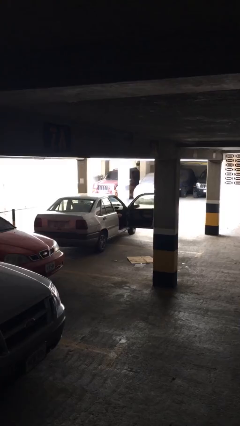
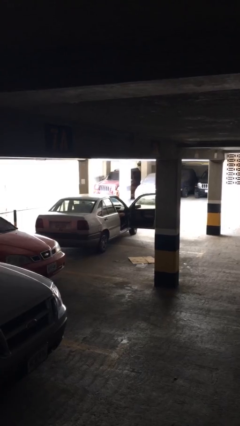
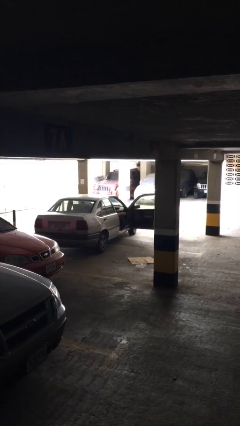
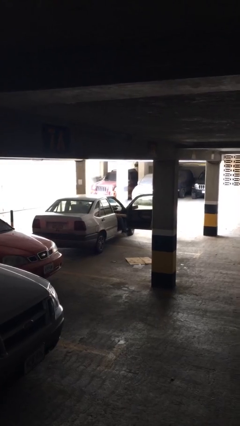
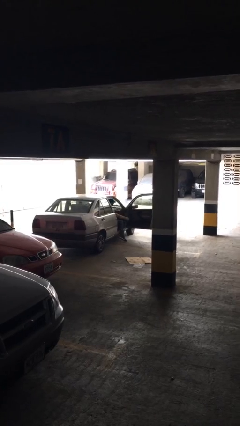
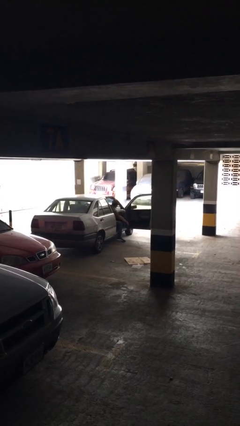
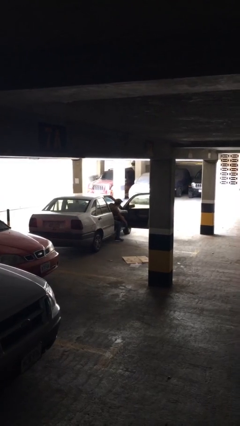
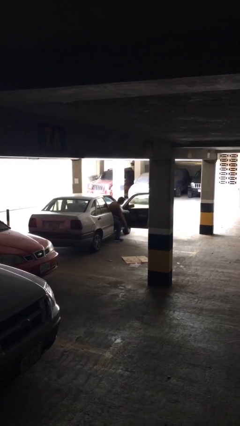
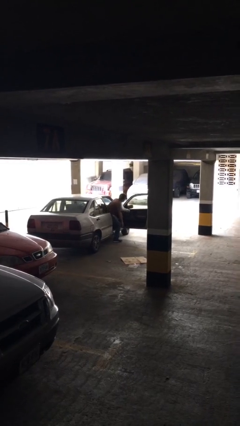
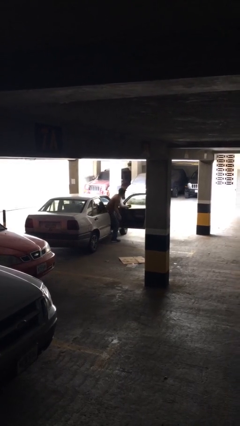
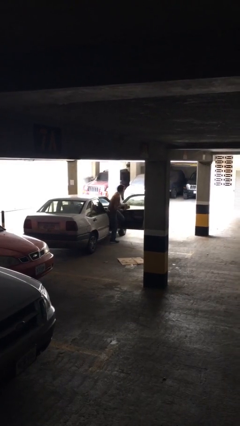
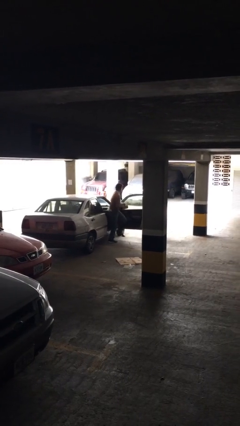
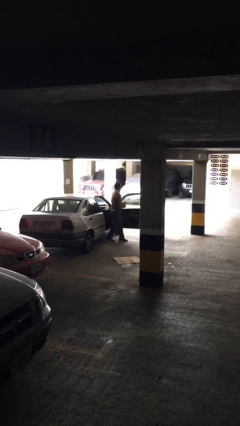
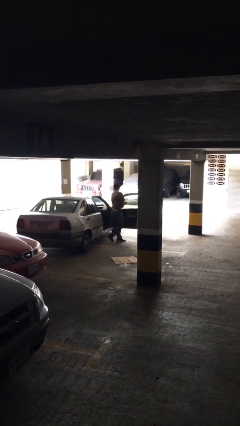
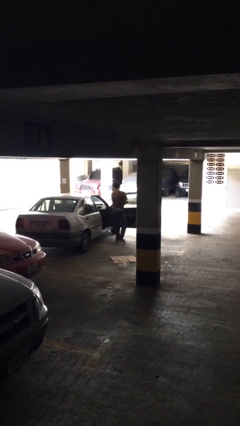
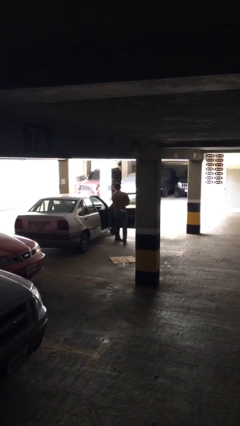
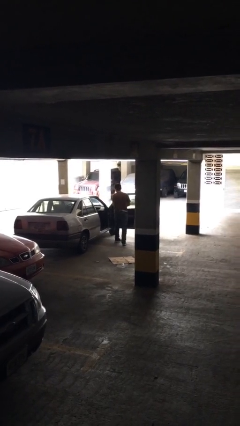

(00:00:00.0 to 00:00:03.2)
person exits car

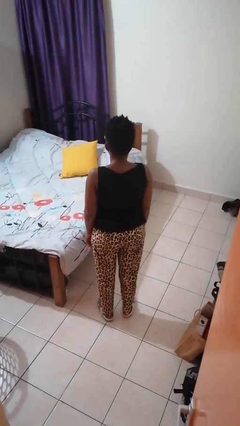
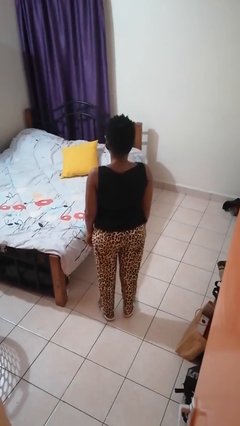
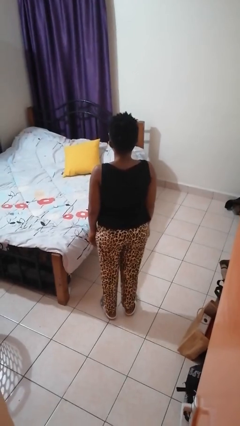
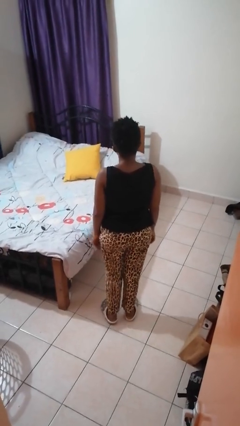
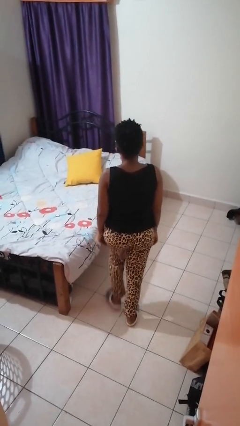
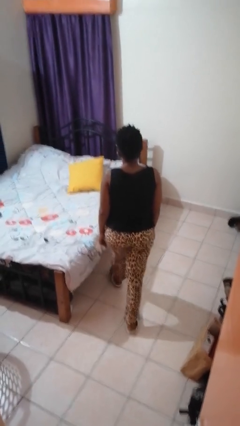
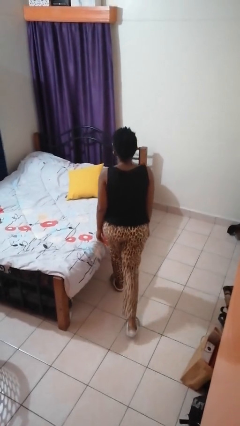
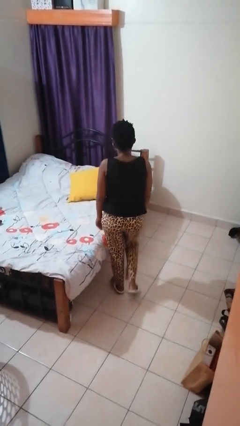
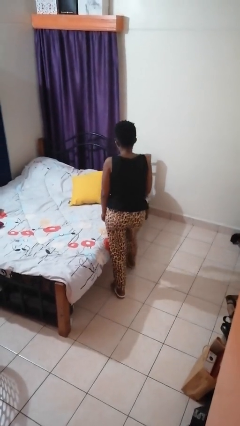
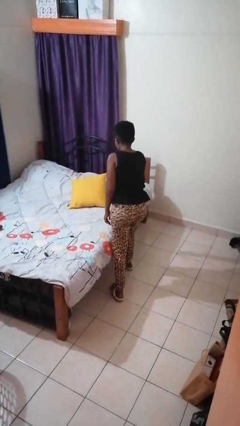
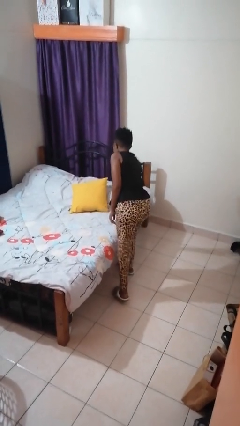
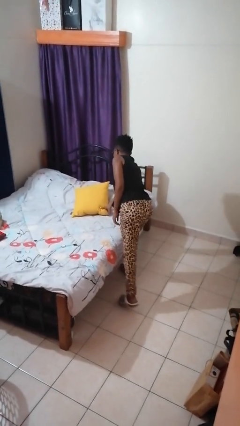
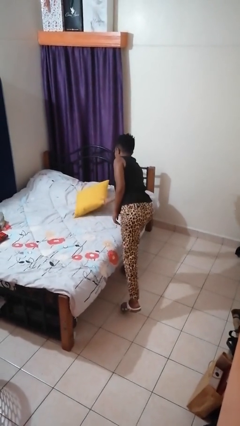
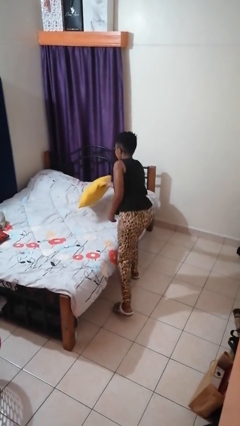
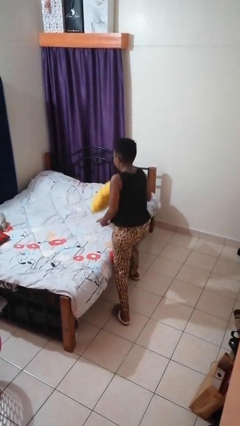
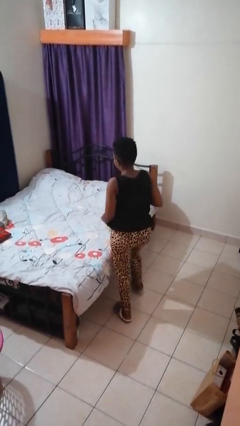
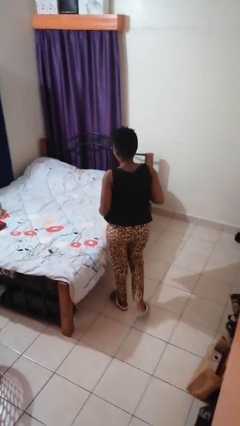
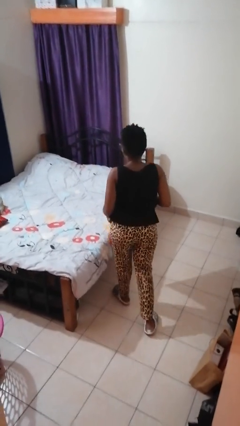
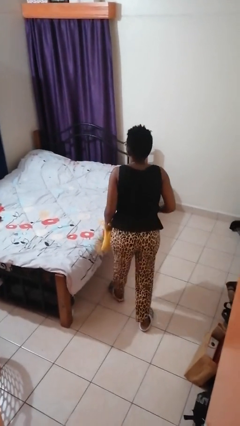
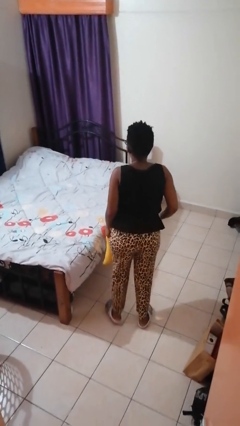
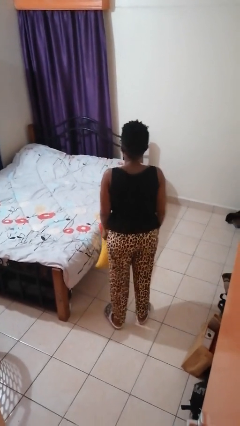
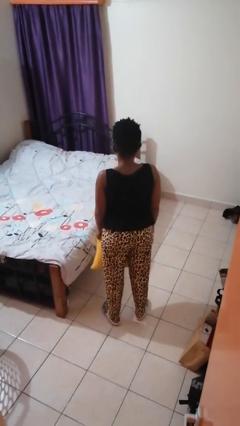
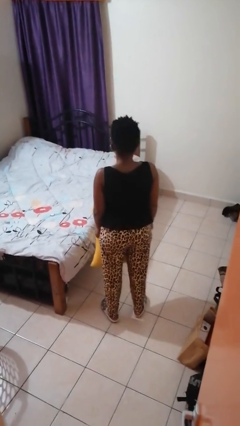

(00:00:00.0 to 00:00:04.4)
person picks up object from bed

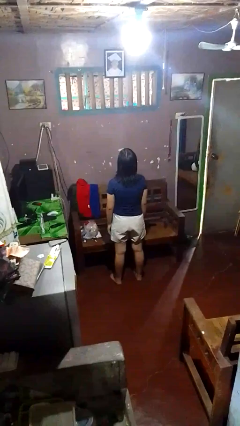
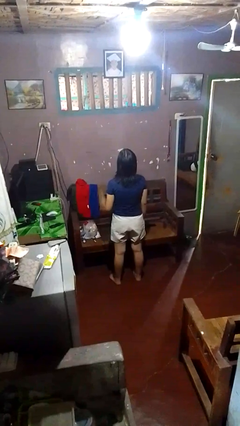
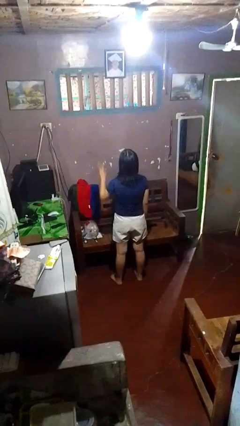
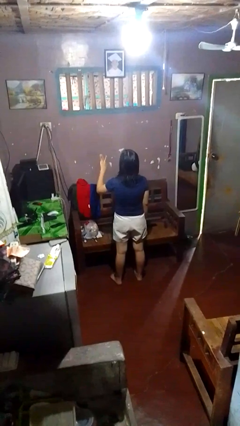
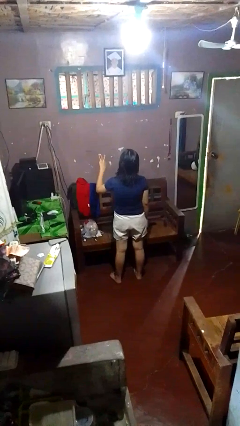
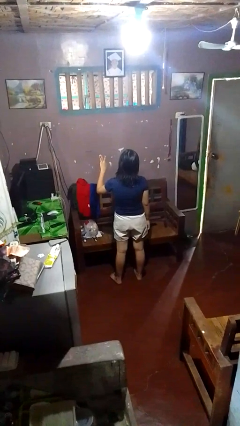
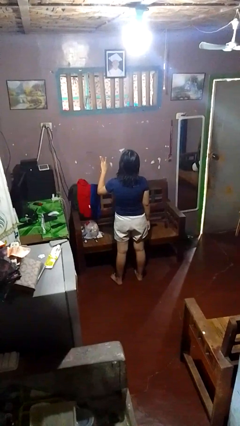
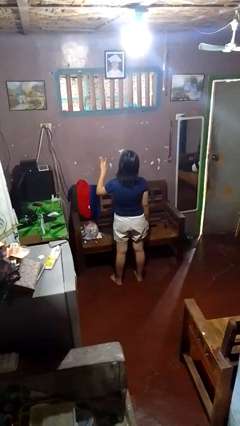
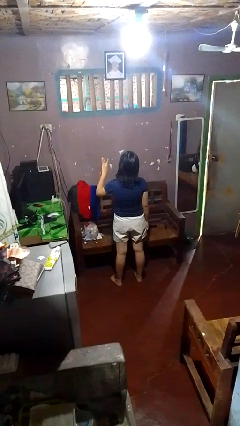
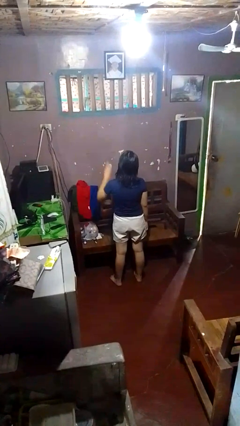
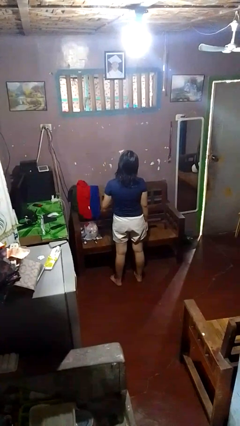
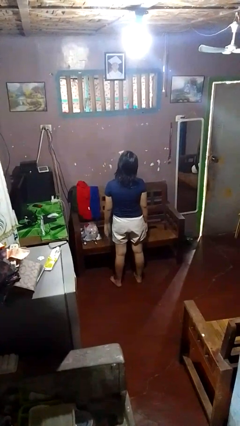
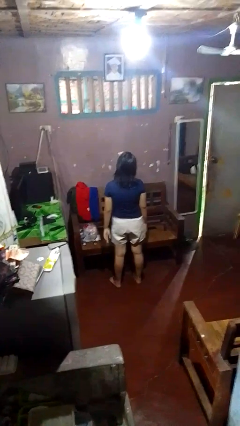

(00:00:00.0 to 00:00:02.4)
person gestures number three

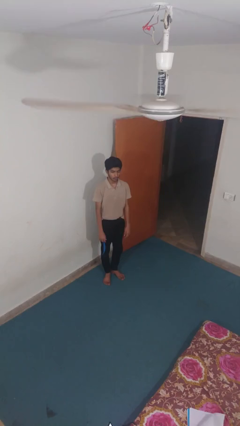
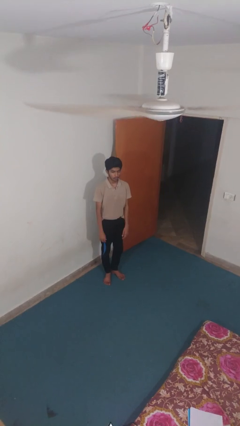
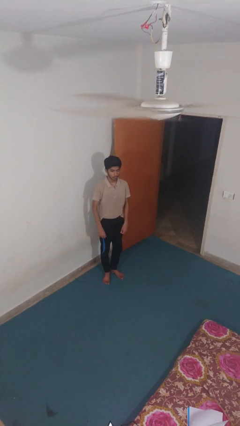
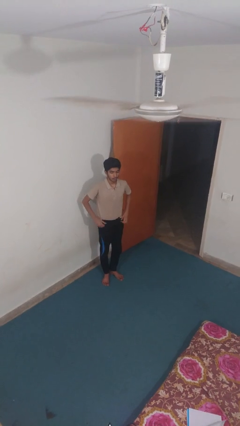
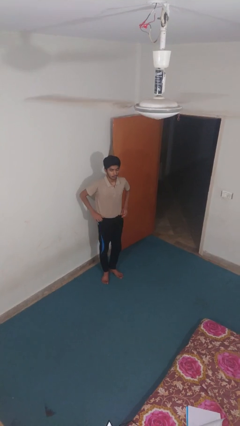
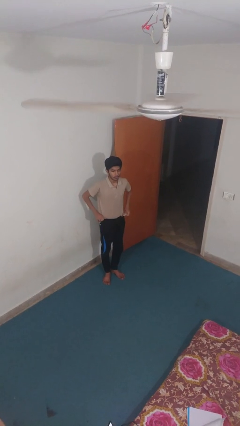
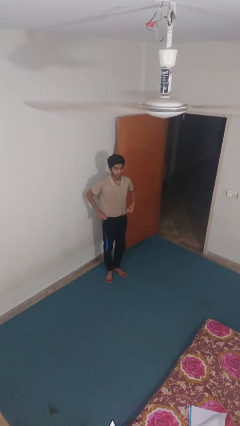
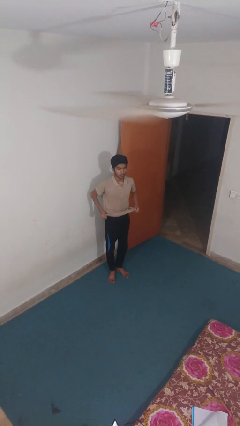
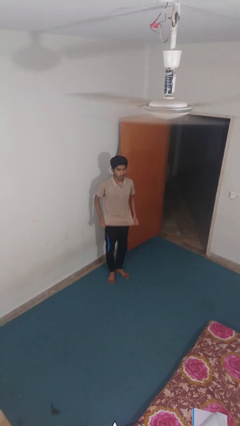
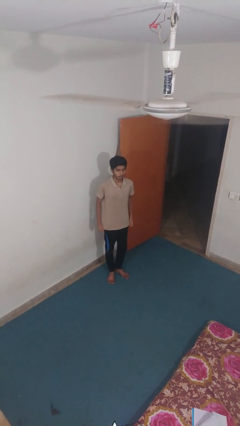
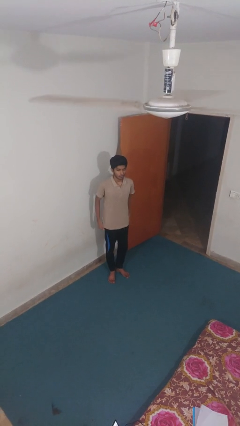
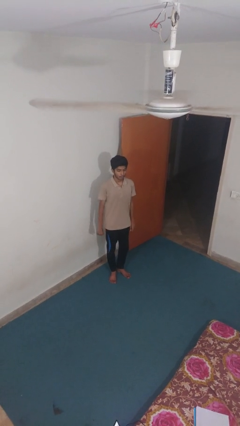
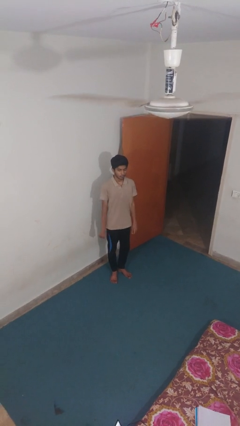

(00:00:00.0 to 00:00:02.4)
person untucks shirt

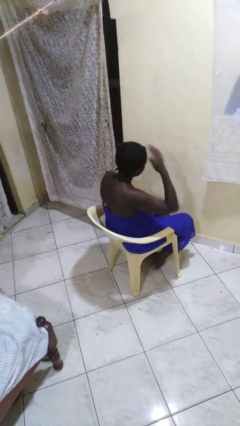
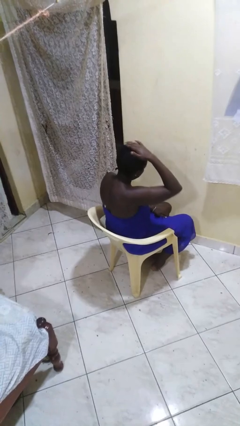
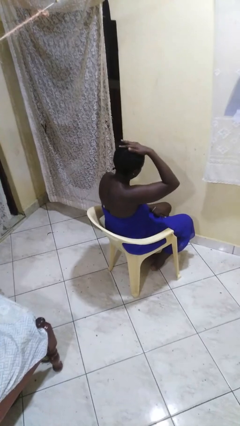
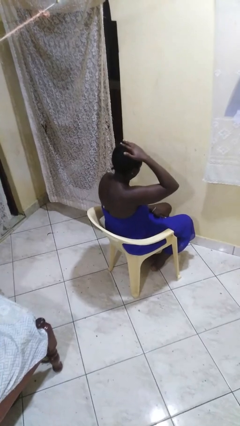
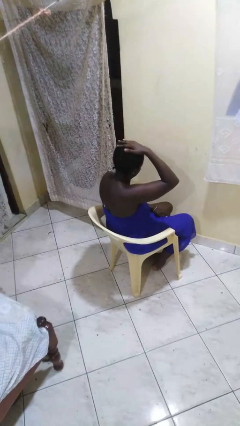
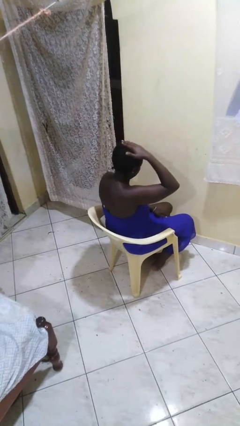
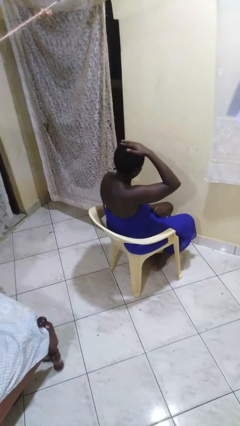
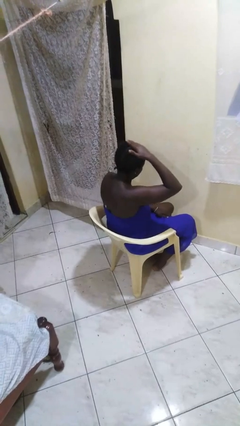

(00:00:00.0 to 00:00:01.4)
person pats head

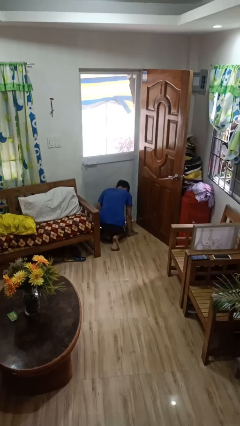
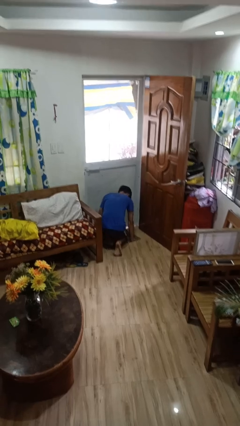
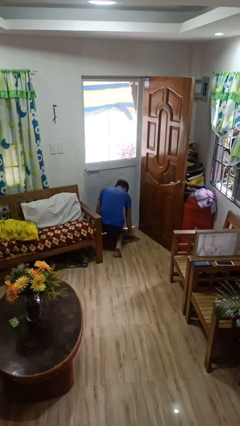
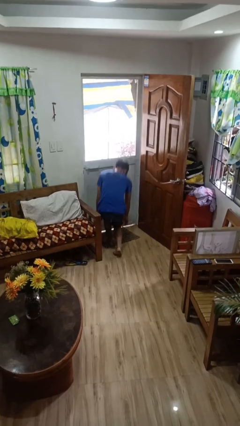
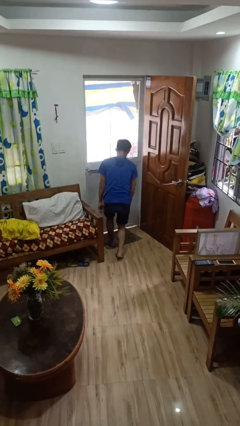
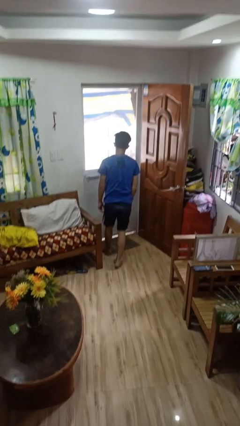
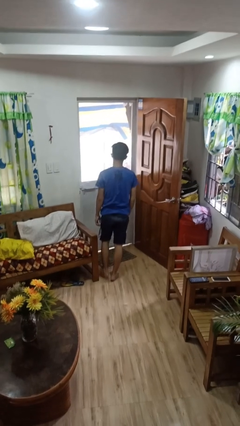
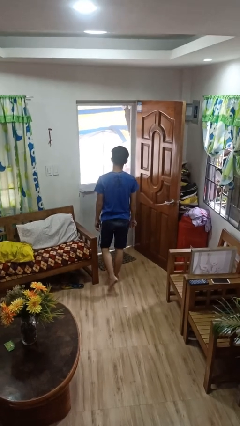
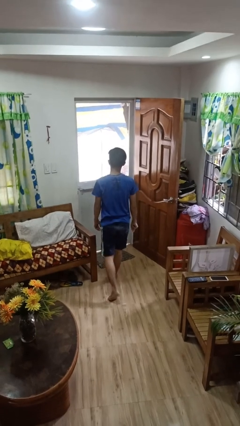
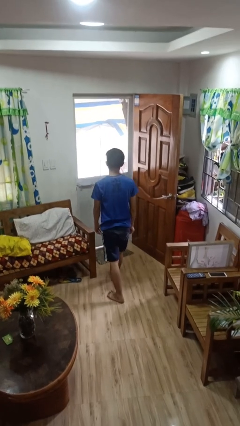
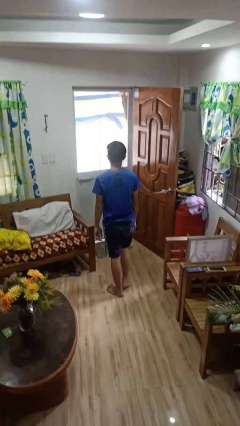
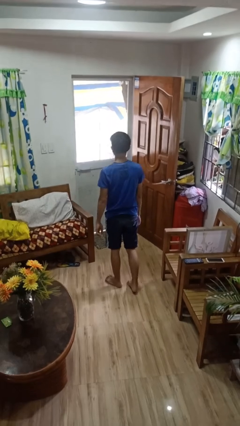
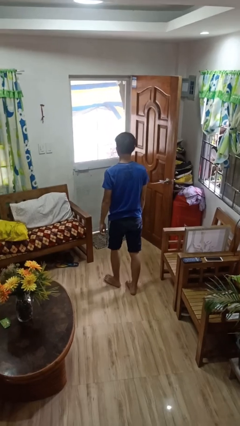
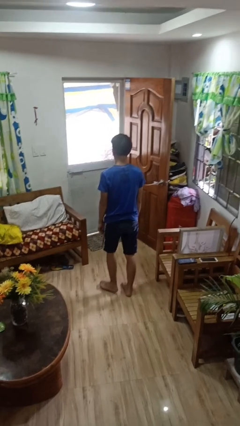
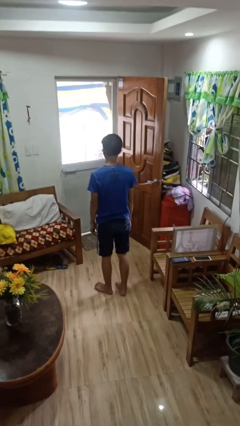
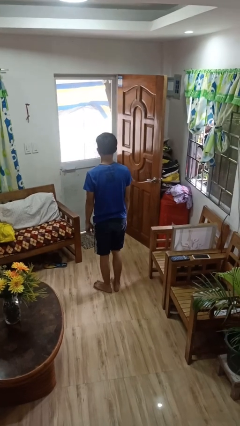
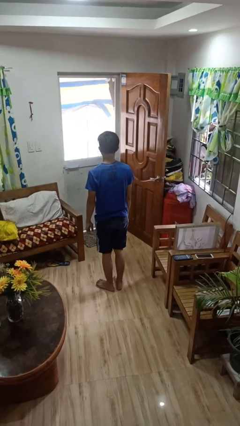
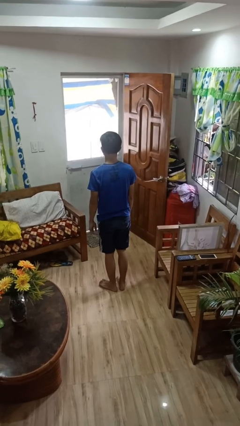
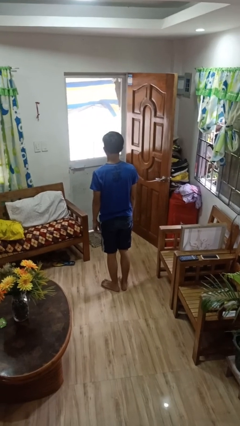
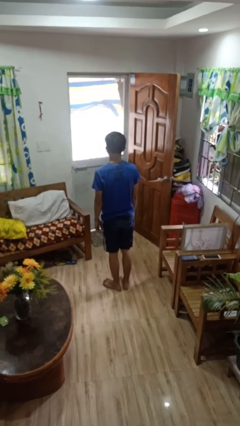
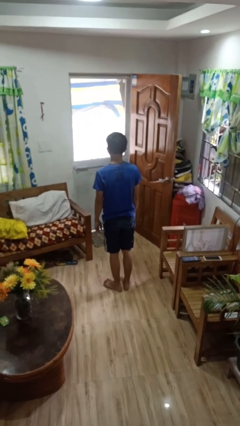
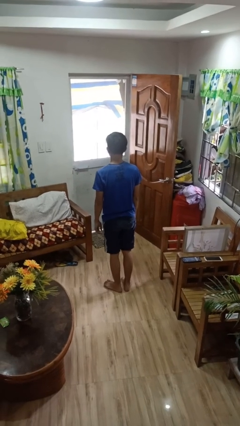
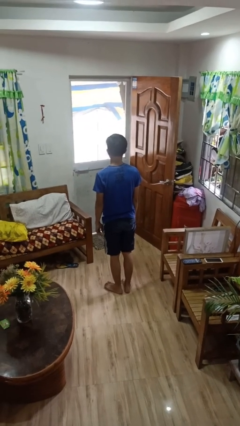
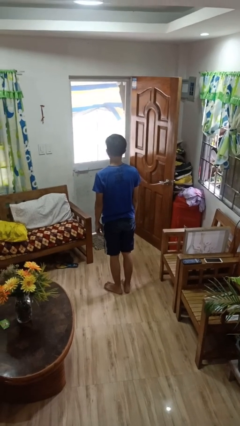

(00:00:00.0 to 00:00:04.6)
person stands up from floor
